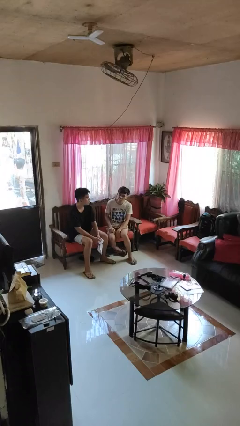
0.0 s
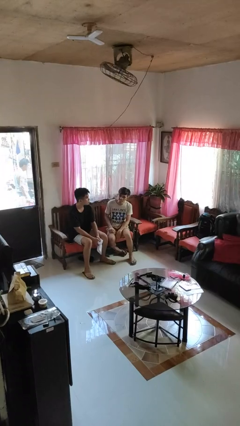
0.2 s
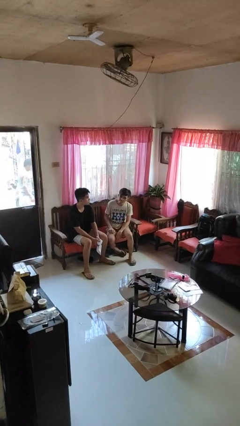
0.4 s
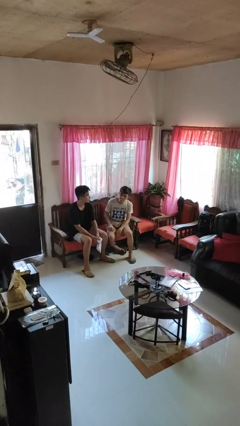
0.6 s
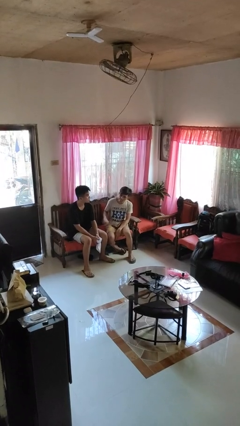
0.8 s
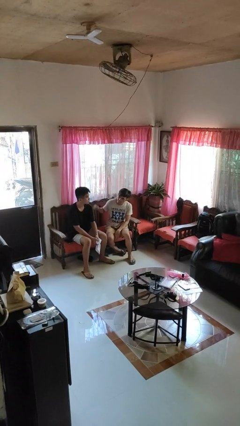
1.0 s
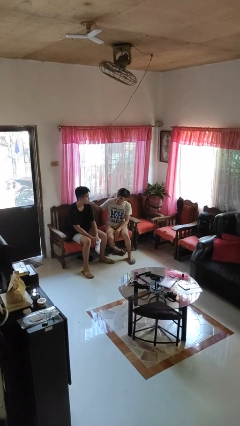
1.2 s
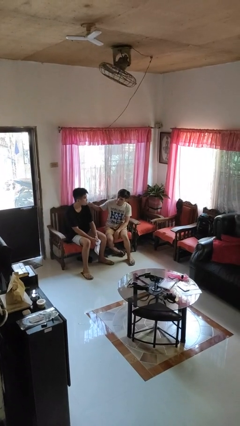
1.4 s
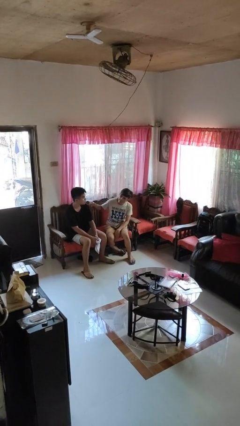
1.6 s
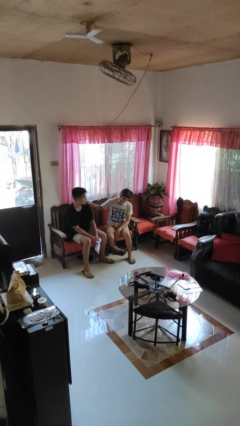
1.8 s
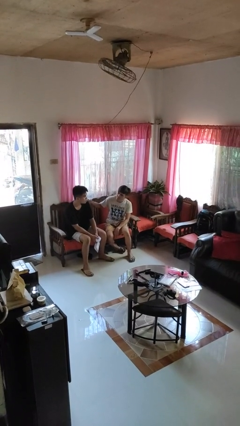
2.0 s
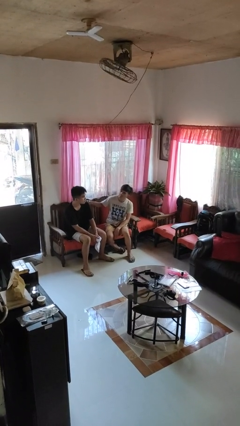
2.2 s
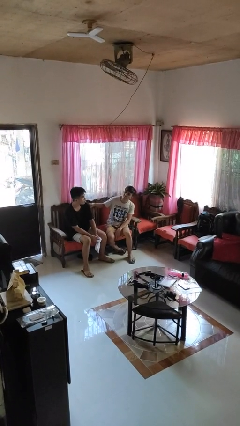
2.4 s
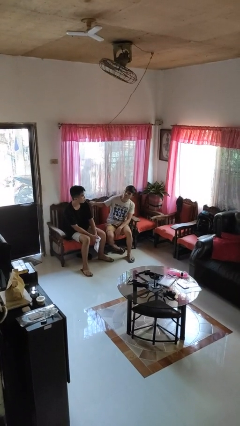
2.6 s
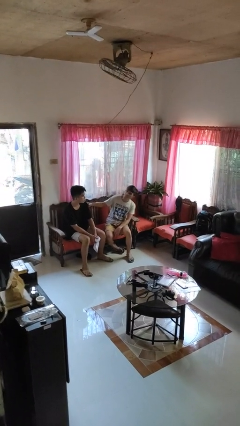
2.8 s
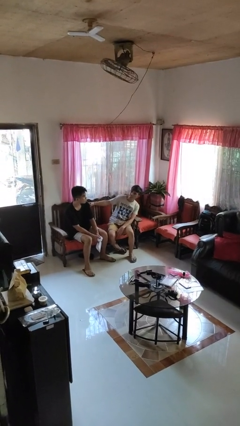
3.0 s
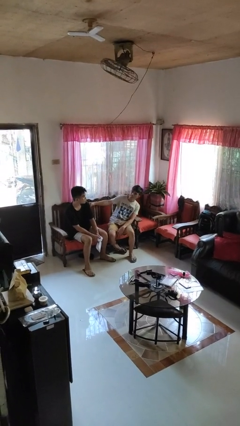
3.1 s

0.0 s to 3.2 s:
person pounds shoulders of person

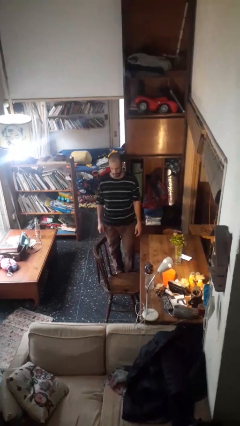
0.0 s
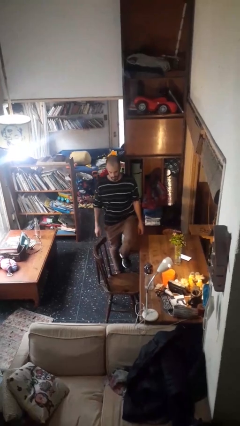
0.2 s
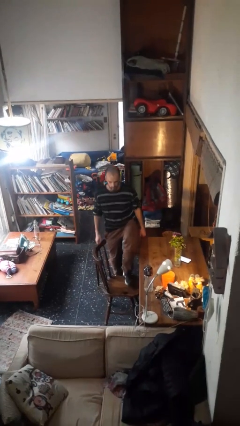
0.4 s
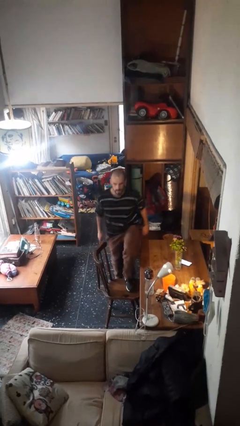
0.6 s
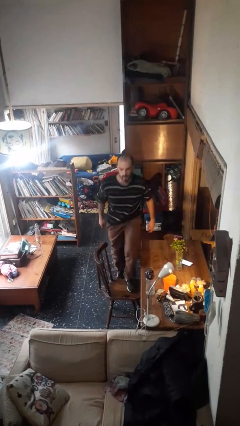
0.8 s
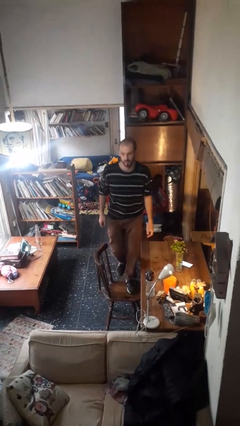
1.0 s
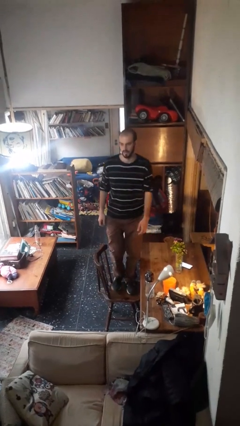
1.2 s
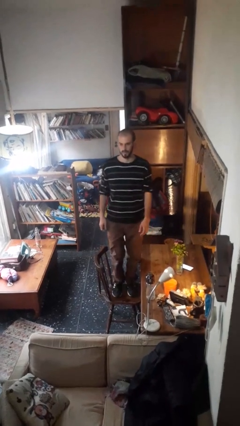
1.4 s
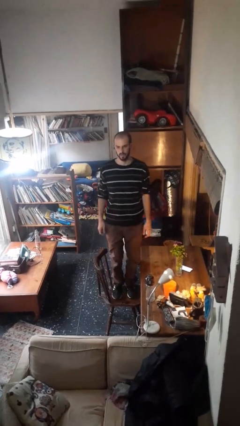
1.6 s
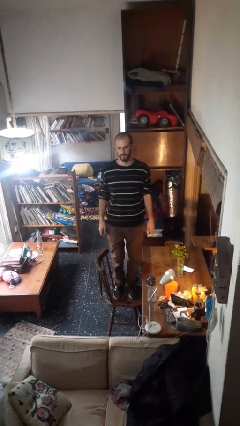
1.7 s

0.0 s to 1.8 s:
person climbs on chair

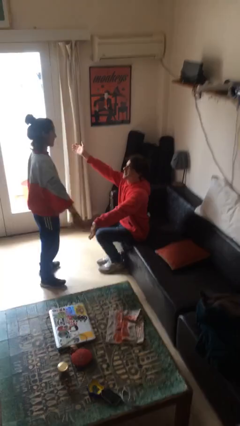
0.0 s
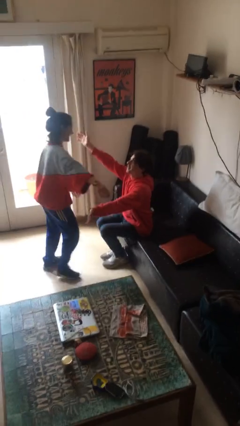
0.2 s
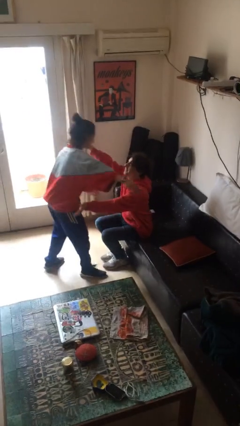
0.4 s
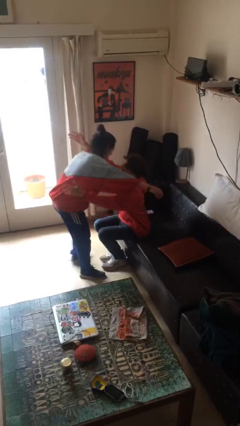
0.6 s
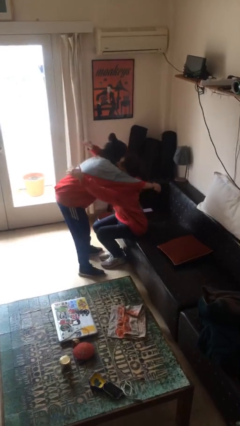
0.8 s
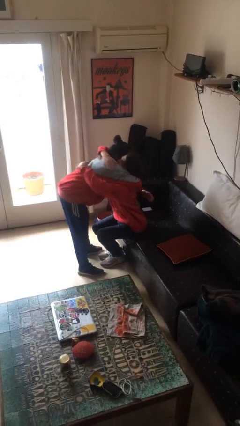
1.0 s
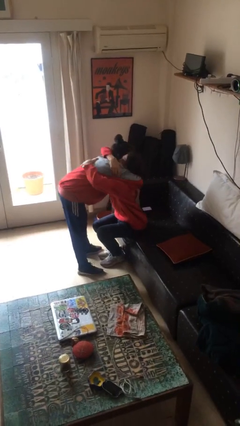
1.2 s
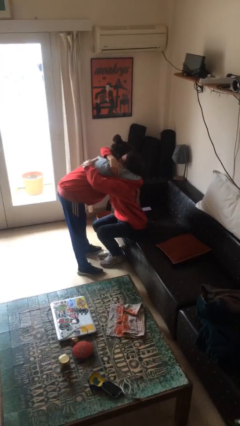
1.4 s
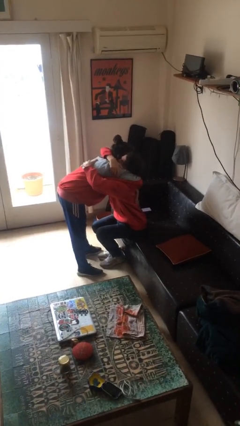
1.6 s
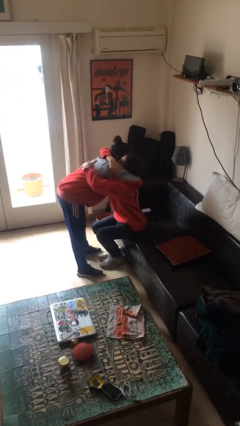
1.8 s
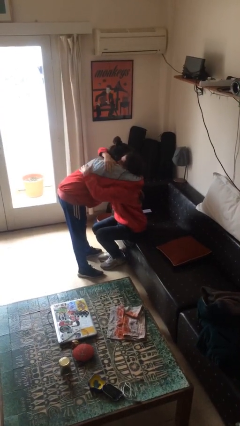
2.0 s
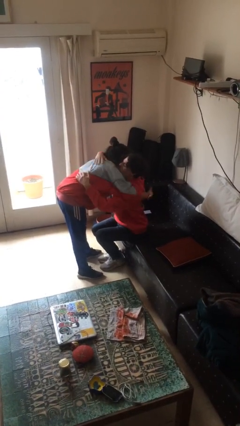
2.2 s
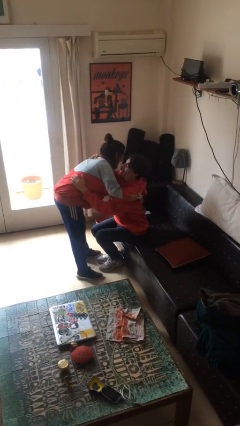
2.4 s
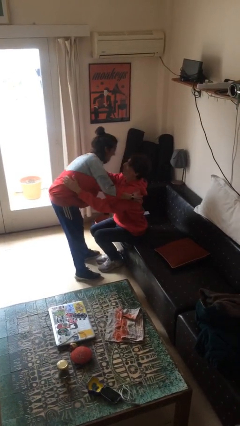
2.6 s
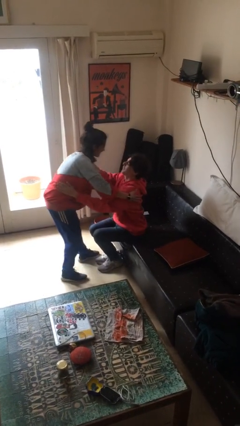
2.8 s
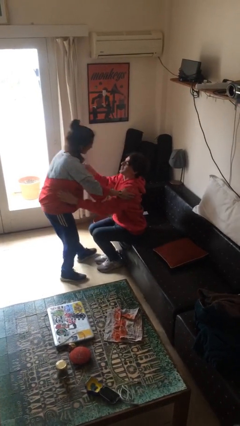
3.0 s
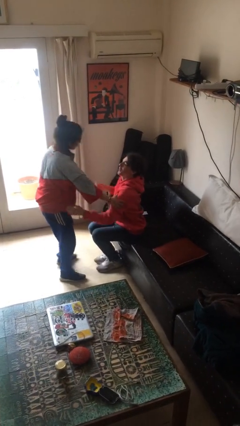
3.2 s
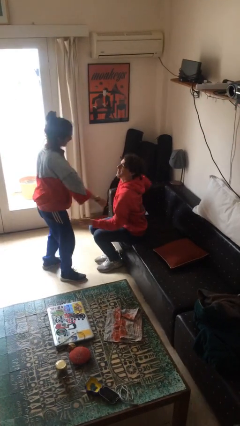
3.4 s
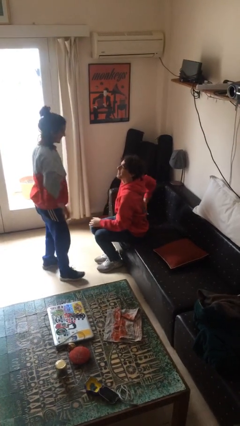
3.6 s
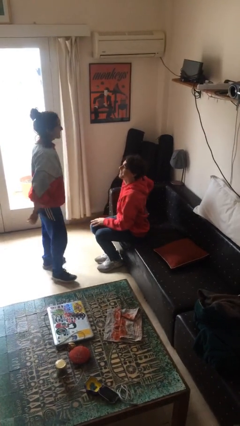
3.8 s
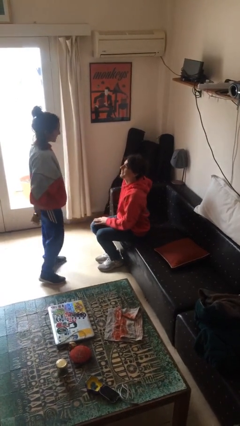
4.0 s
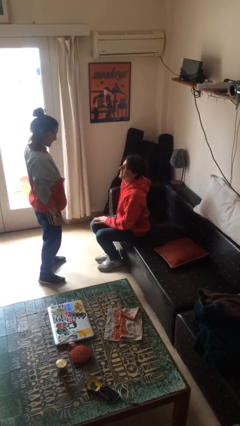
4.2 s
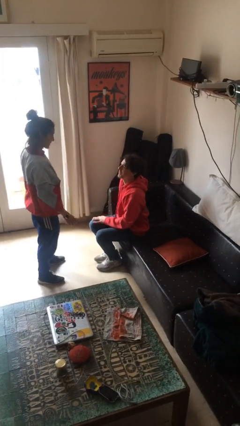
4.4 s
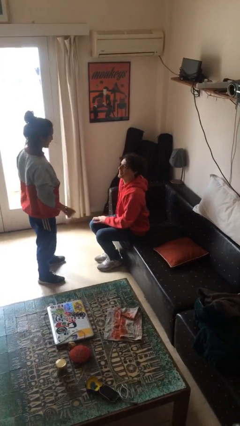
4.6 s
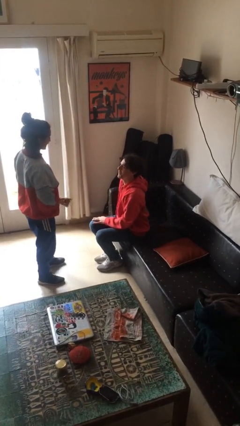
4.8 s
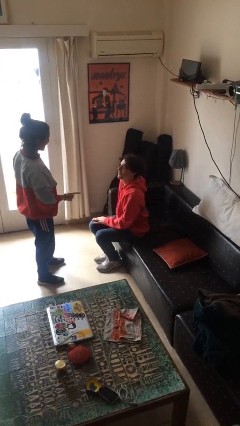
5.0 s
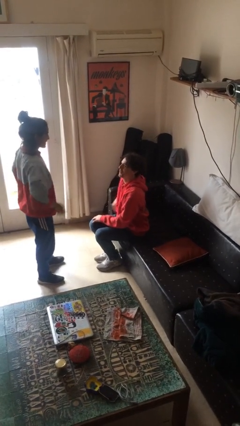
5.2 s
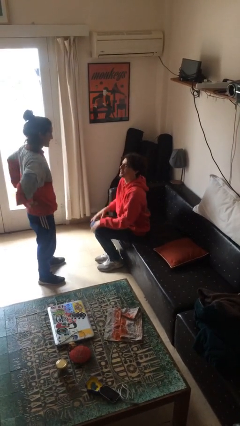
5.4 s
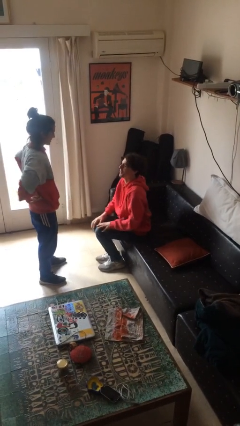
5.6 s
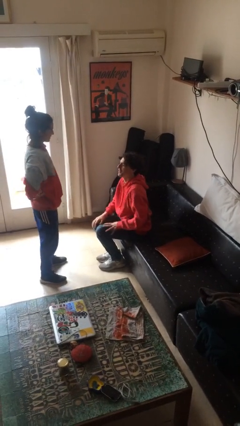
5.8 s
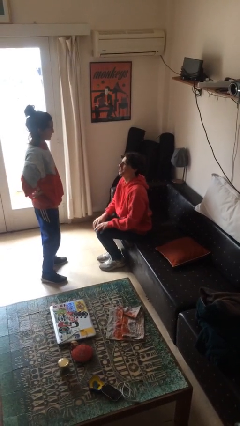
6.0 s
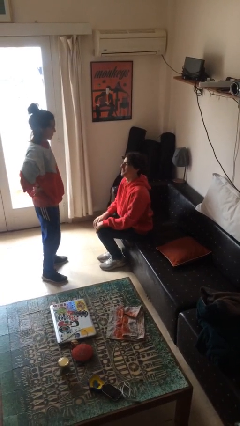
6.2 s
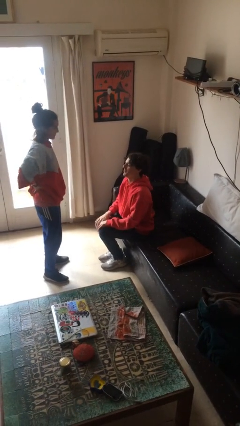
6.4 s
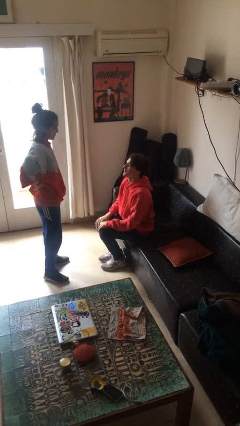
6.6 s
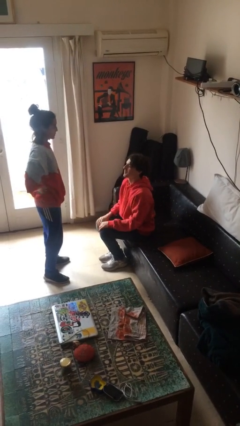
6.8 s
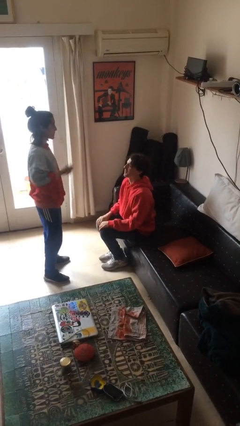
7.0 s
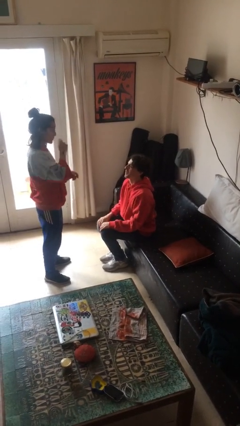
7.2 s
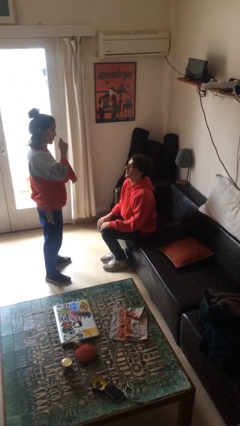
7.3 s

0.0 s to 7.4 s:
person embraces person

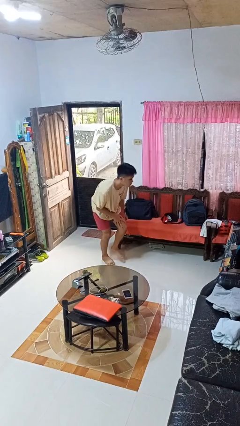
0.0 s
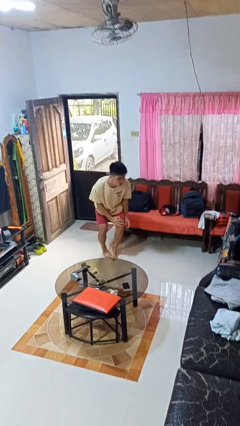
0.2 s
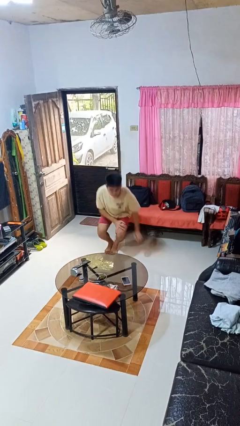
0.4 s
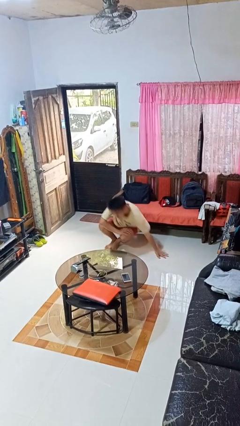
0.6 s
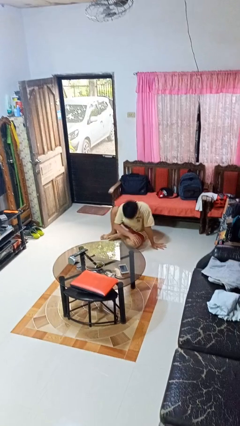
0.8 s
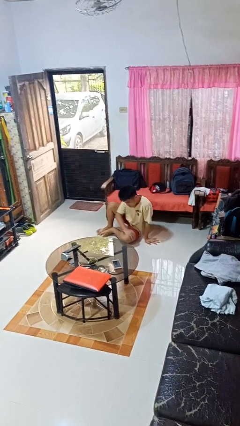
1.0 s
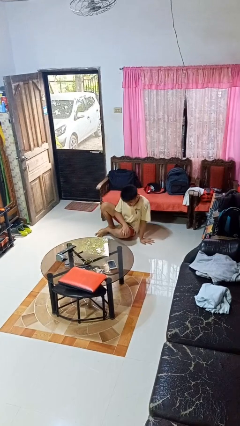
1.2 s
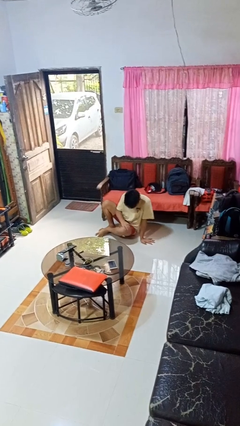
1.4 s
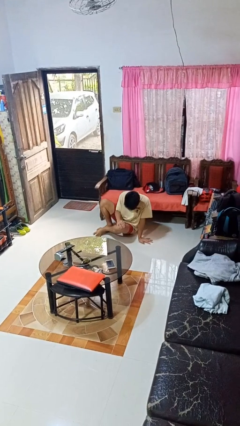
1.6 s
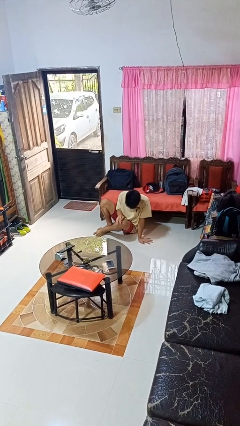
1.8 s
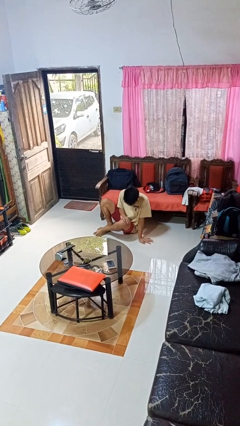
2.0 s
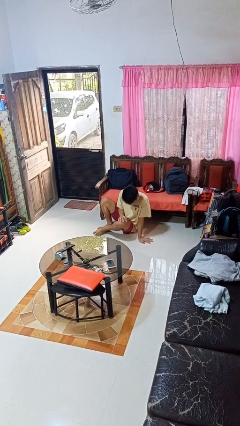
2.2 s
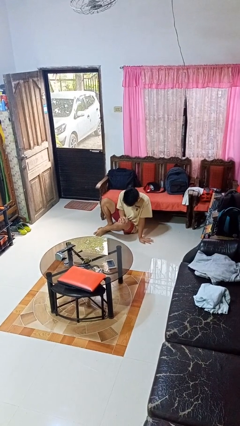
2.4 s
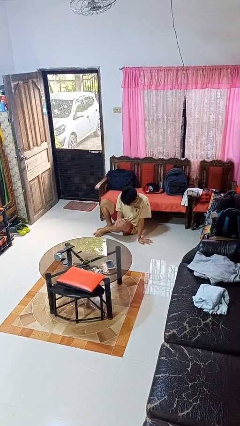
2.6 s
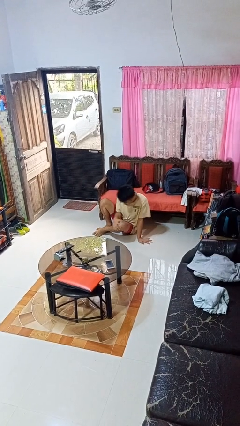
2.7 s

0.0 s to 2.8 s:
person lies down on floor

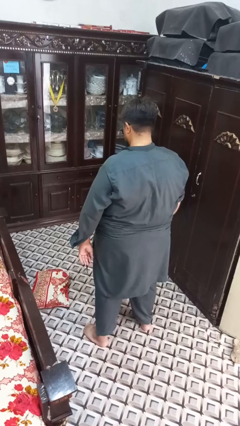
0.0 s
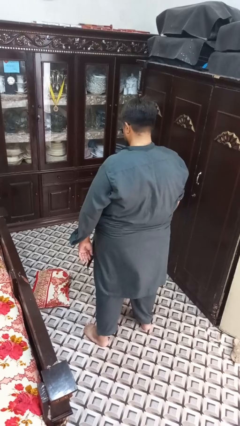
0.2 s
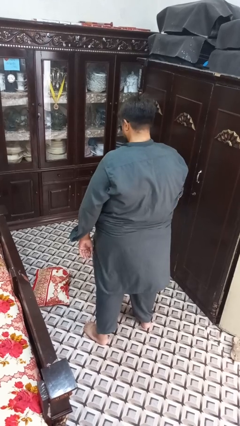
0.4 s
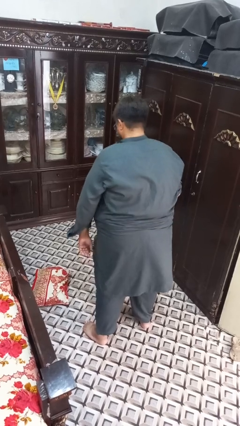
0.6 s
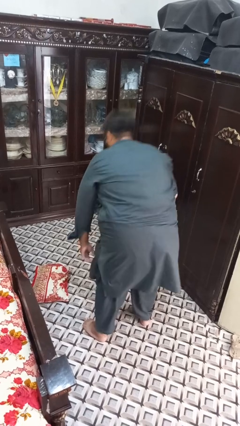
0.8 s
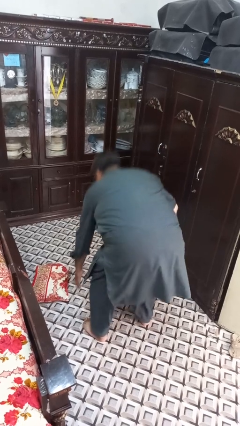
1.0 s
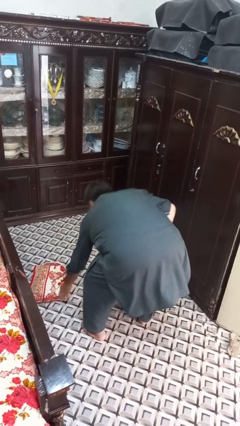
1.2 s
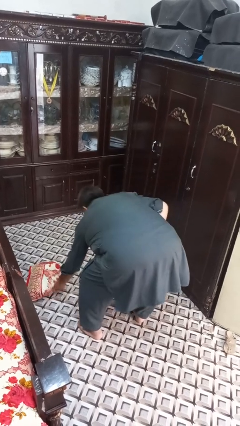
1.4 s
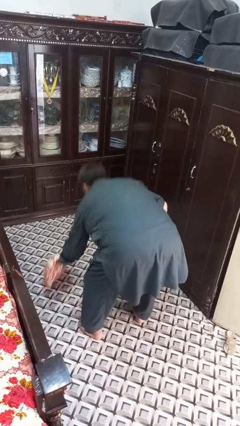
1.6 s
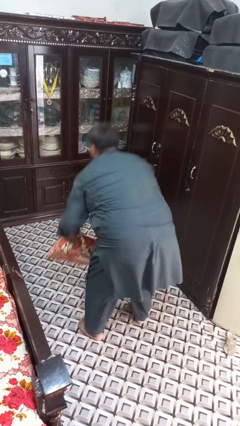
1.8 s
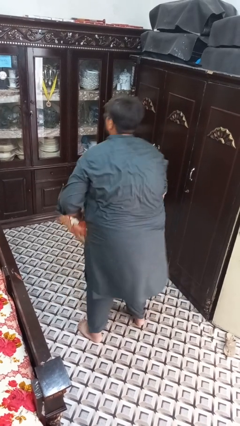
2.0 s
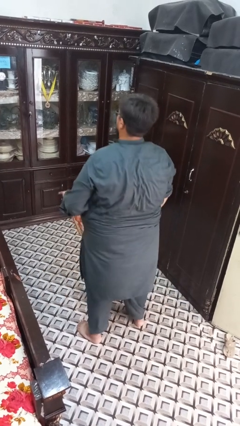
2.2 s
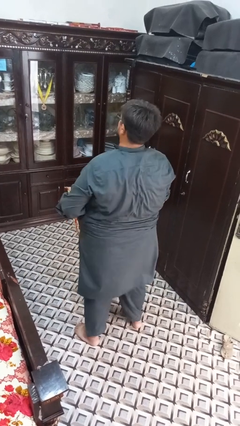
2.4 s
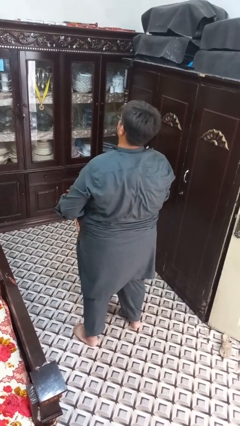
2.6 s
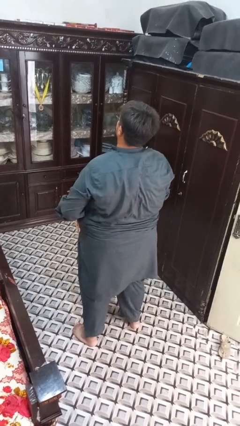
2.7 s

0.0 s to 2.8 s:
person picks up object from floor
